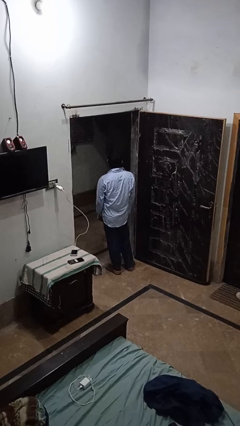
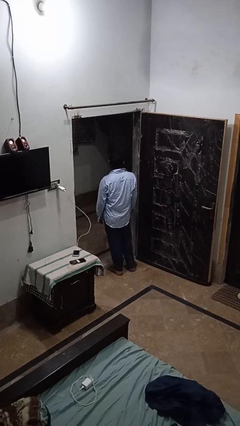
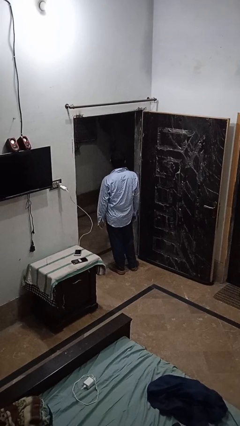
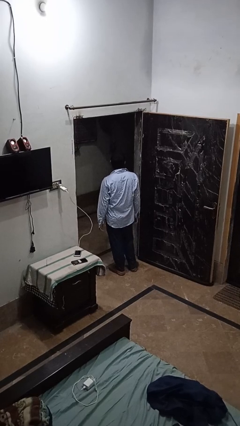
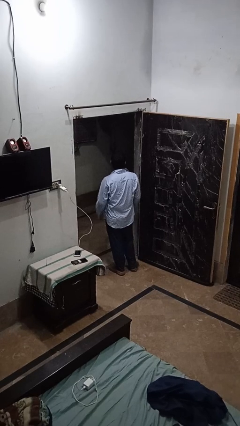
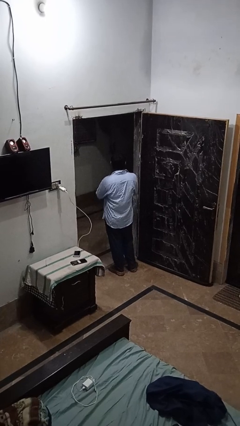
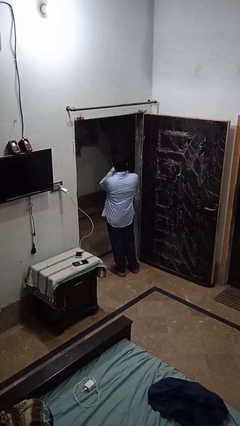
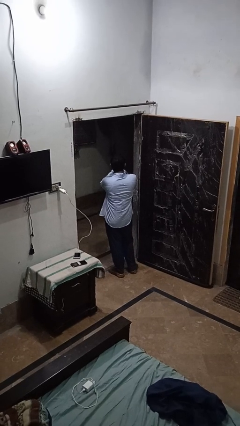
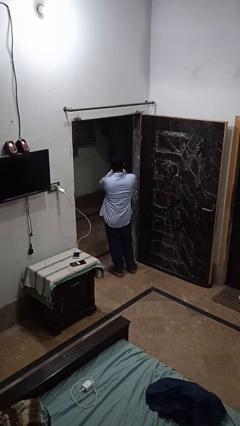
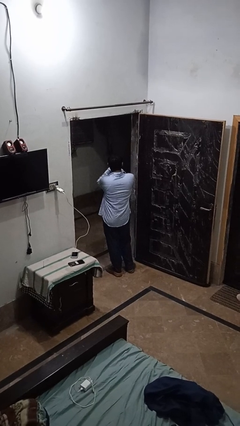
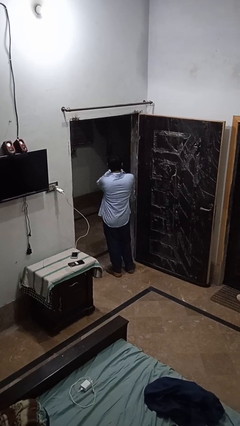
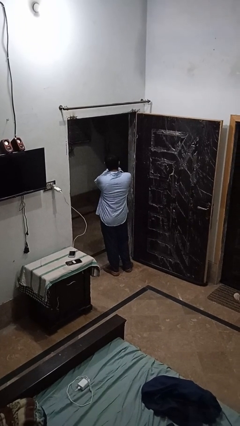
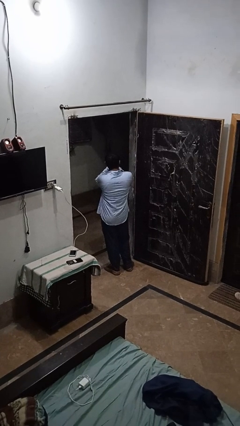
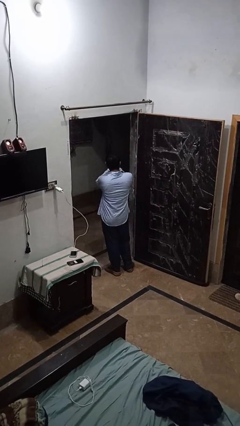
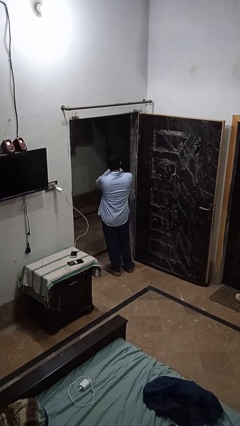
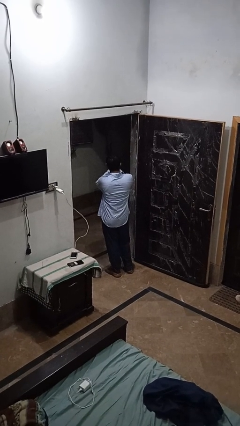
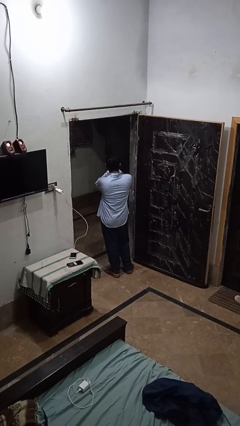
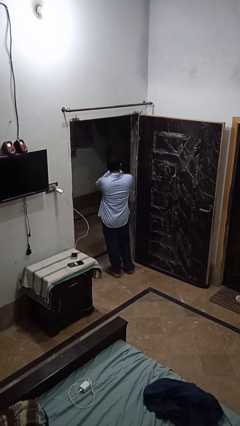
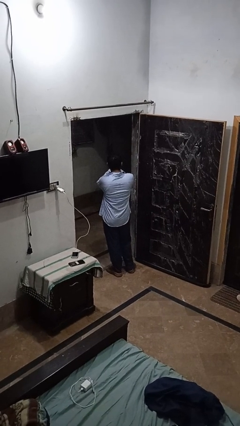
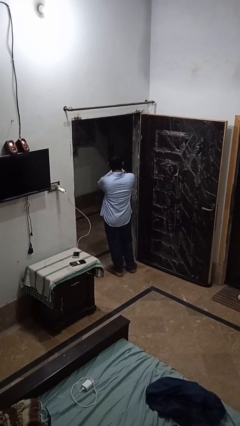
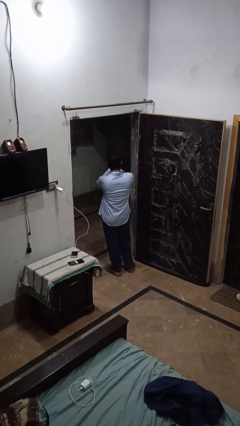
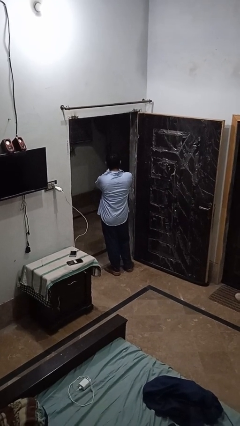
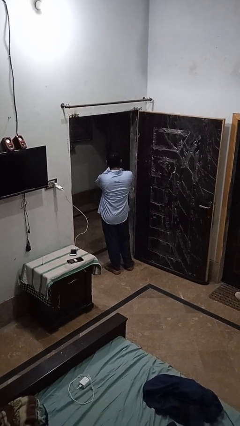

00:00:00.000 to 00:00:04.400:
person blows into hands

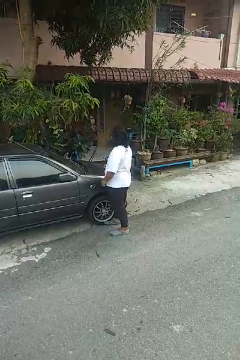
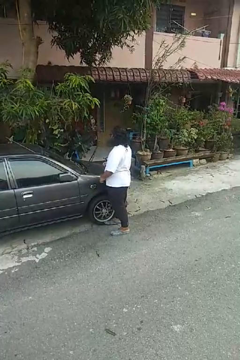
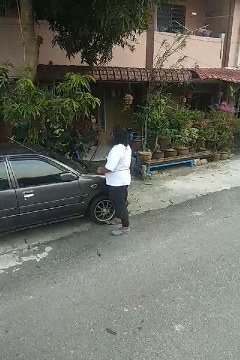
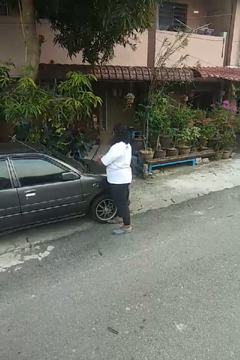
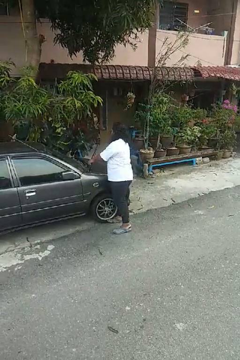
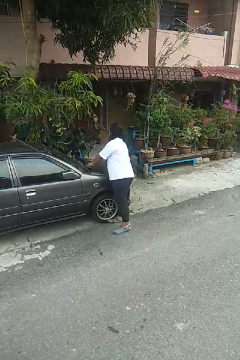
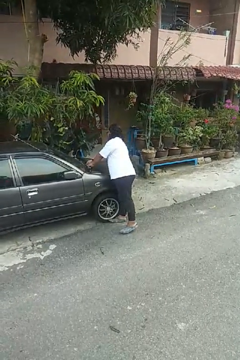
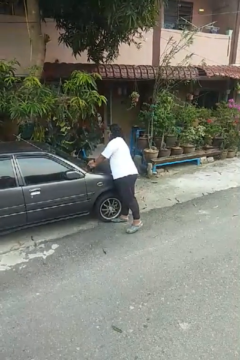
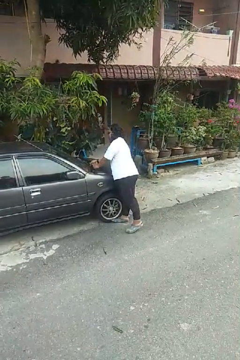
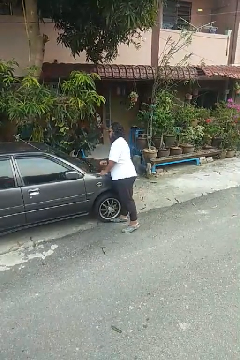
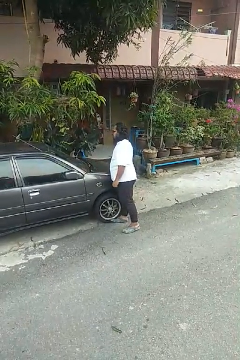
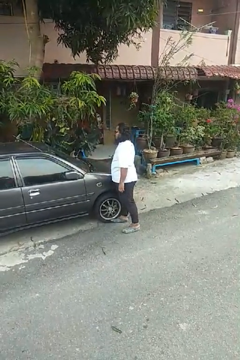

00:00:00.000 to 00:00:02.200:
person flips down car wipers

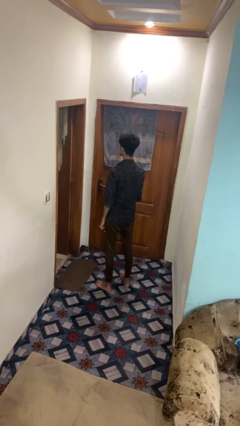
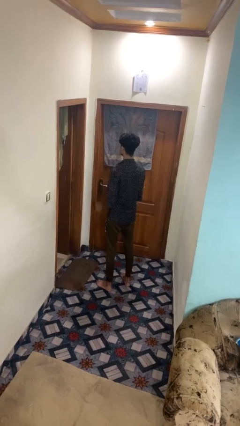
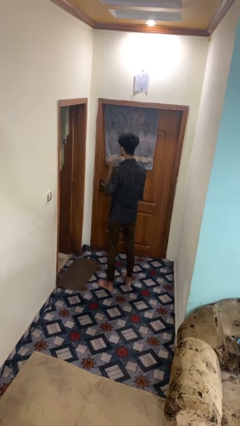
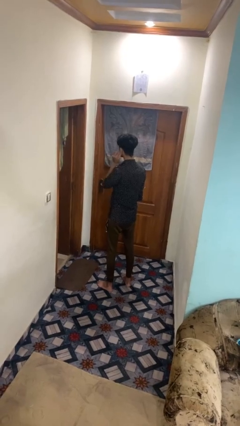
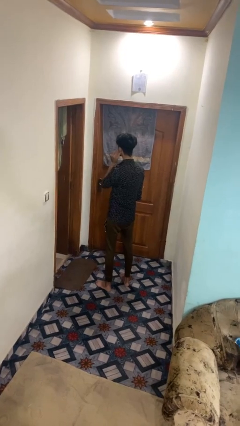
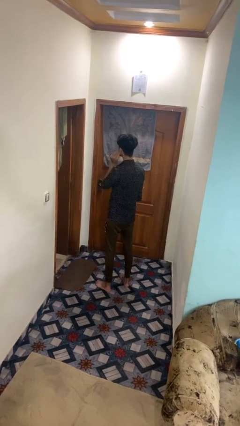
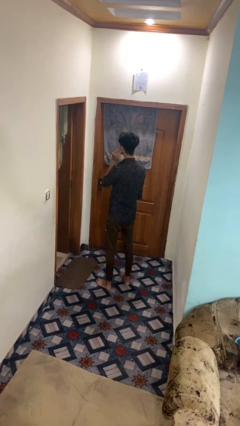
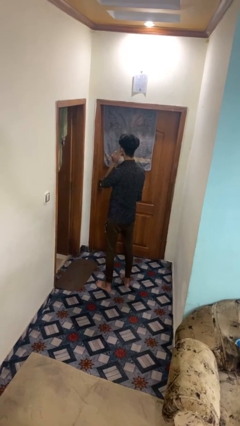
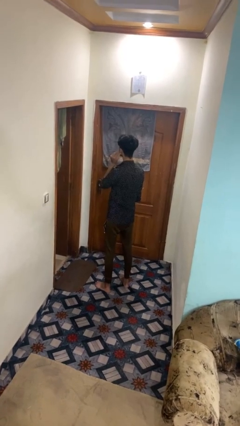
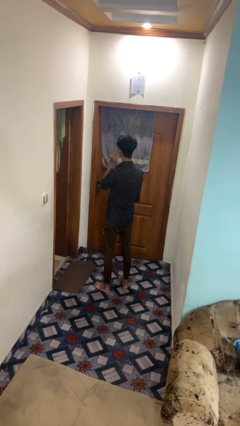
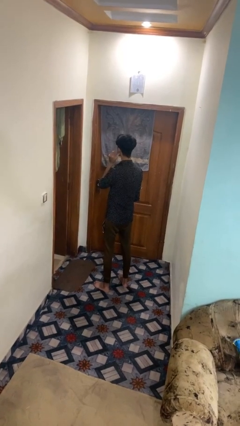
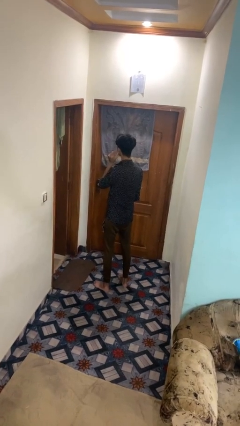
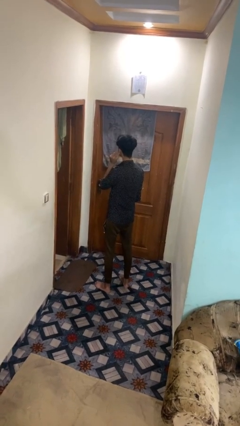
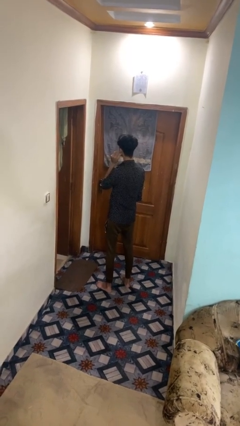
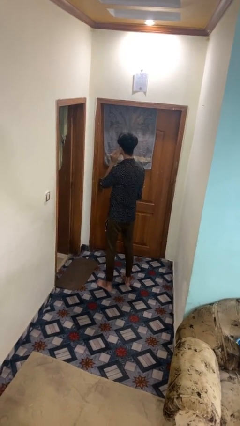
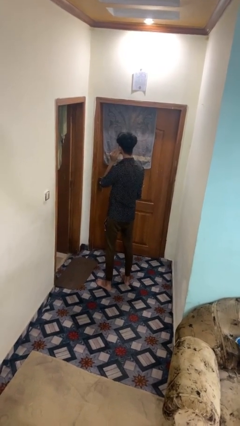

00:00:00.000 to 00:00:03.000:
person touches earlobe

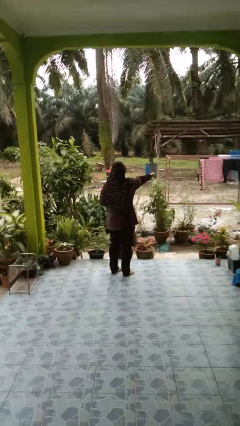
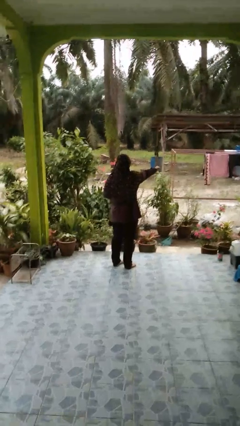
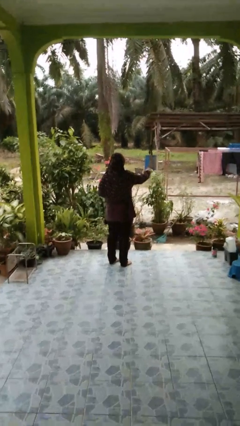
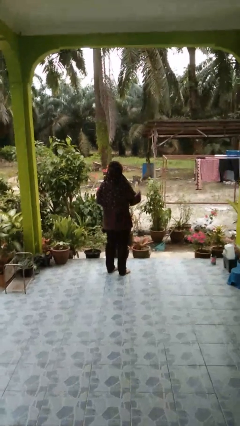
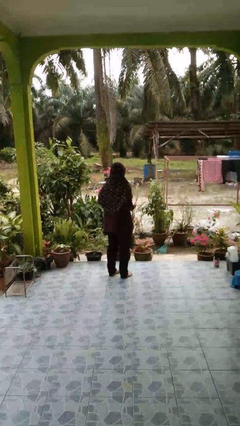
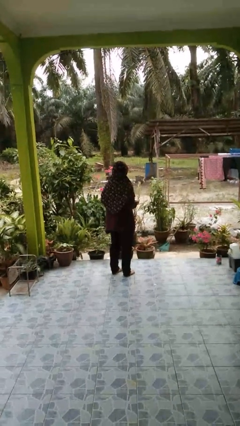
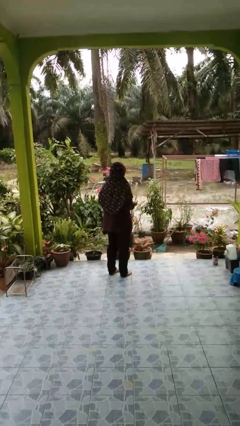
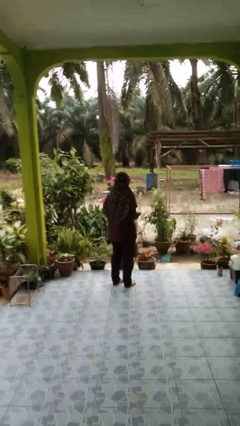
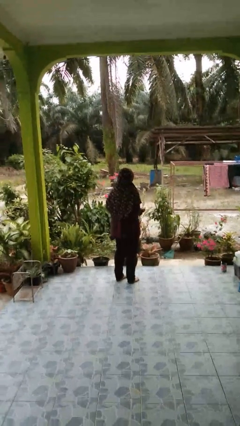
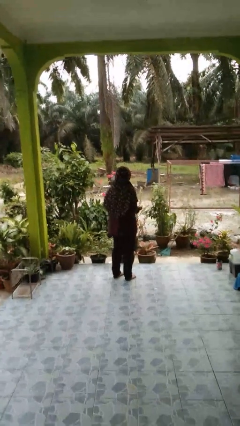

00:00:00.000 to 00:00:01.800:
person punches

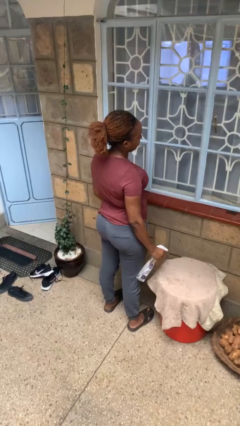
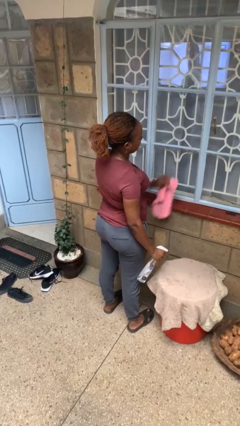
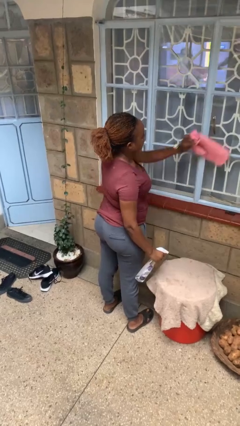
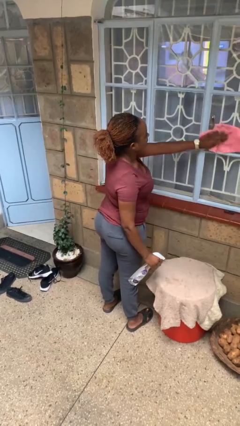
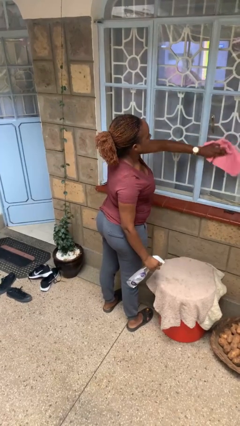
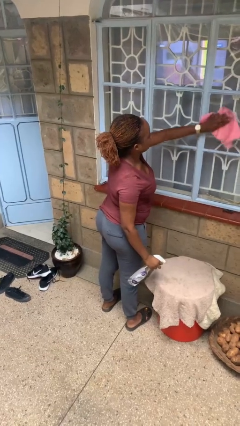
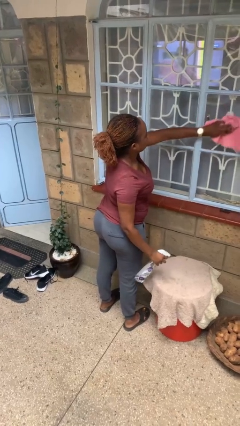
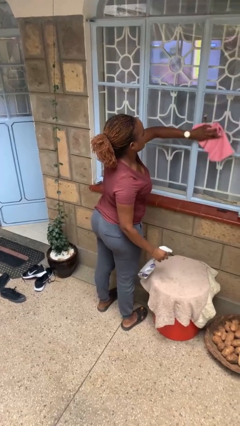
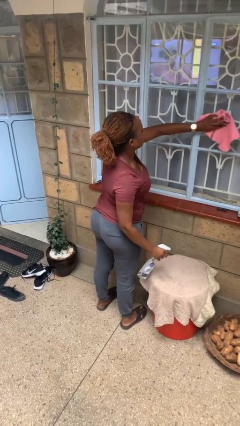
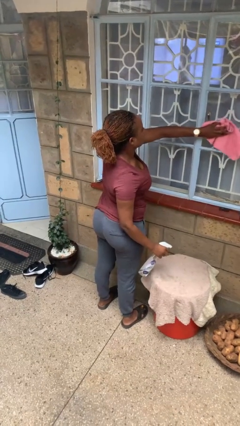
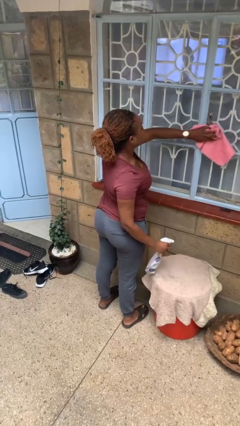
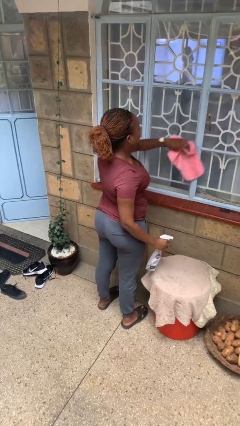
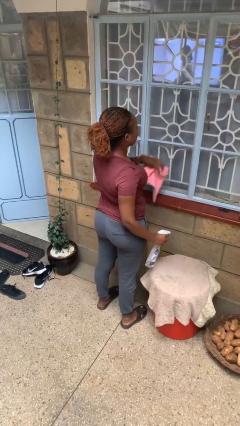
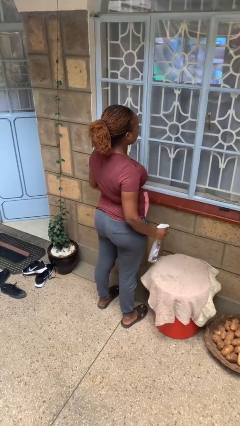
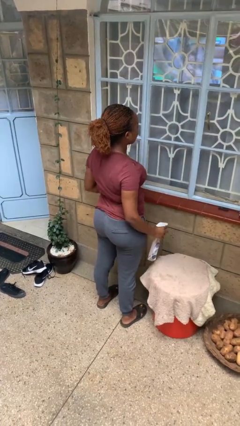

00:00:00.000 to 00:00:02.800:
person washes window

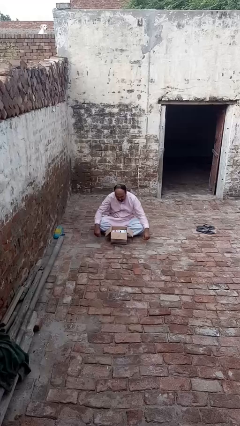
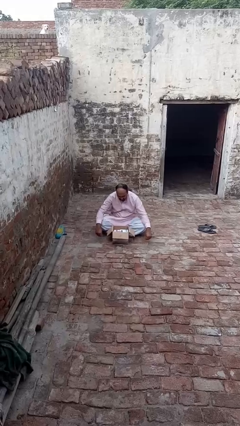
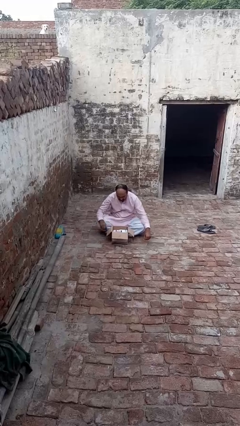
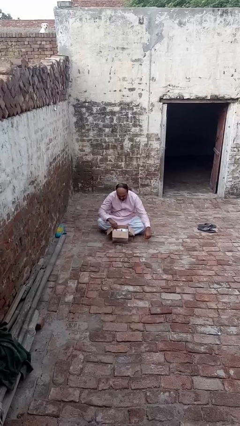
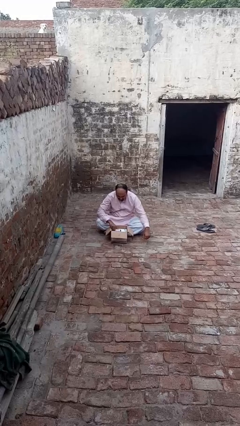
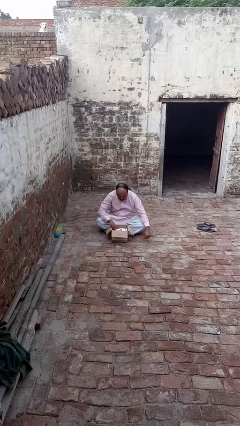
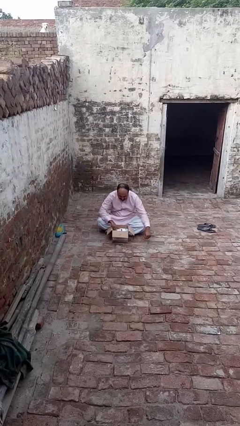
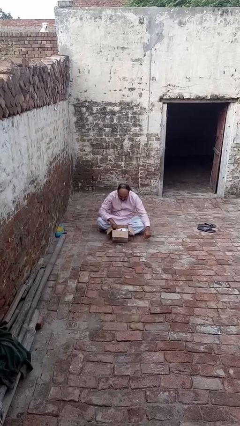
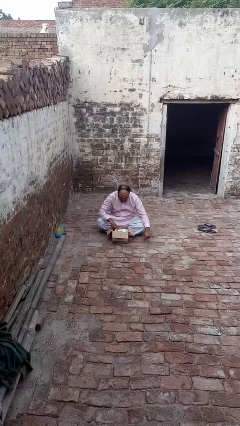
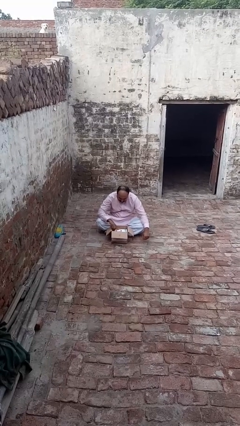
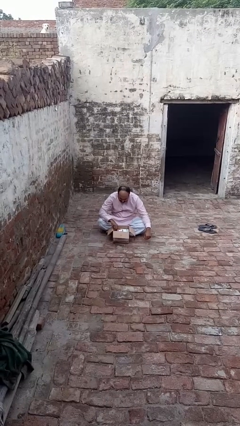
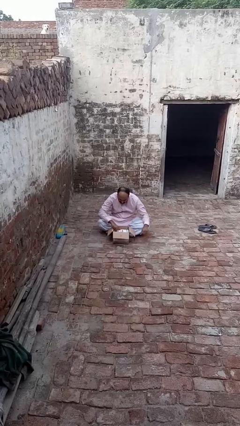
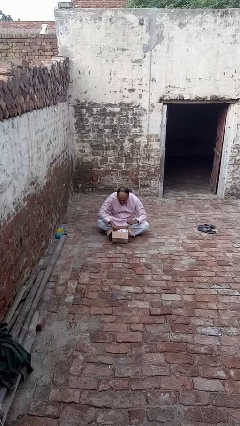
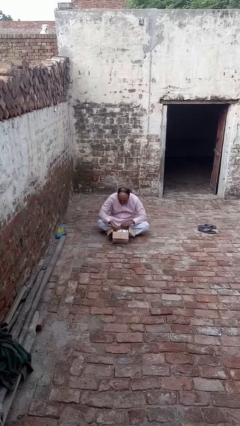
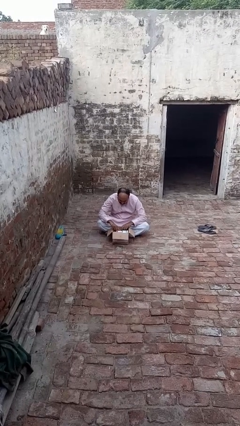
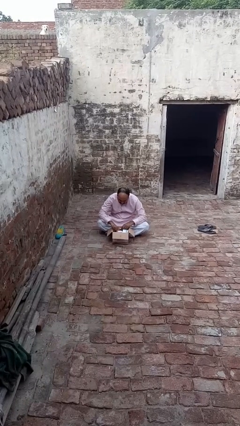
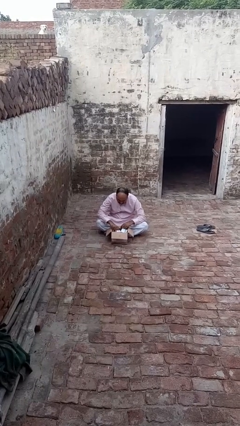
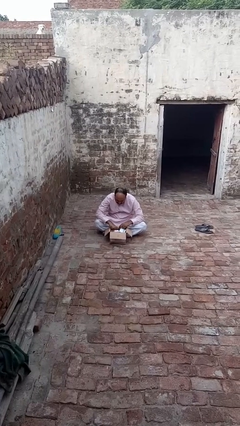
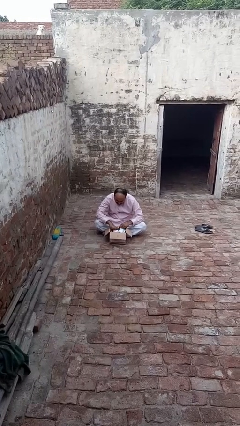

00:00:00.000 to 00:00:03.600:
person searches in box
